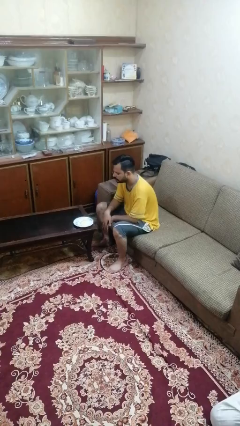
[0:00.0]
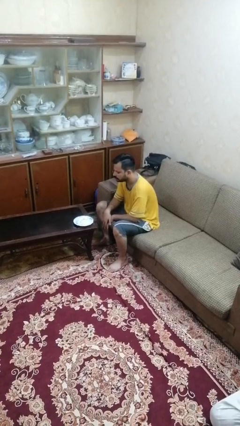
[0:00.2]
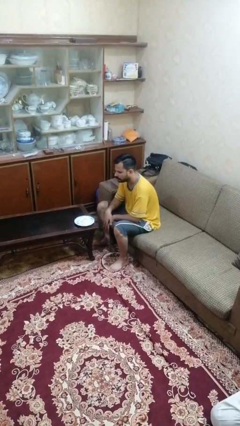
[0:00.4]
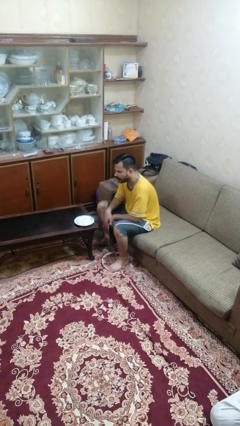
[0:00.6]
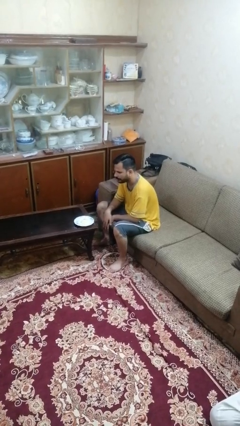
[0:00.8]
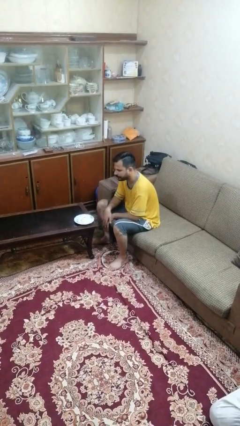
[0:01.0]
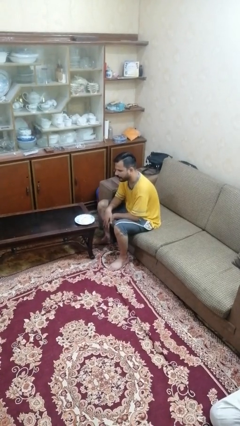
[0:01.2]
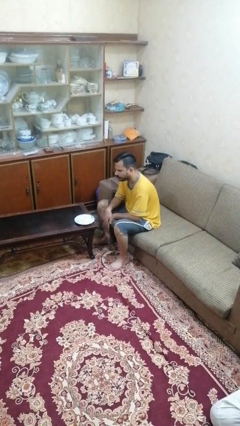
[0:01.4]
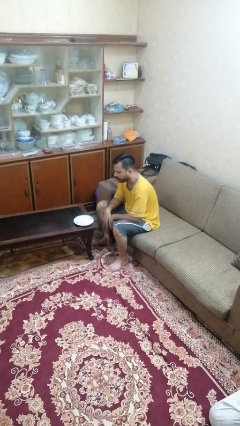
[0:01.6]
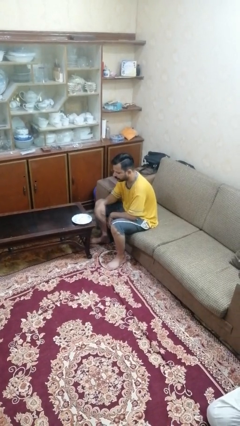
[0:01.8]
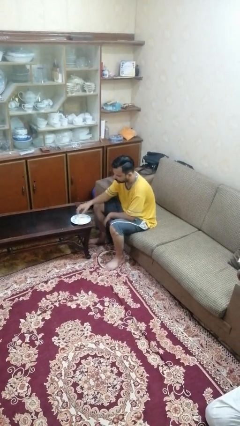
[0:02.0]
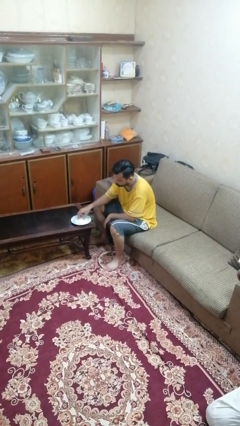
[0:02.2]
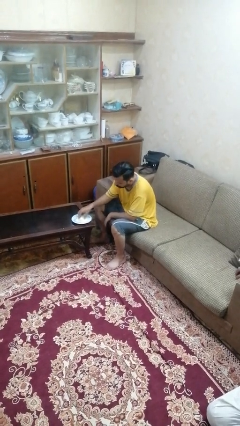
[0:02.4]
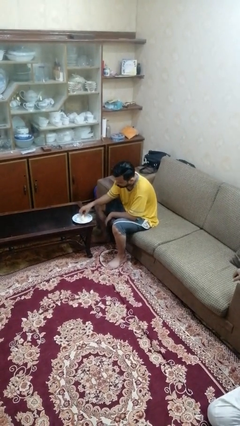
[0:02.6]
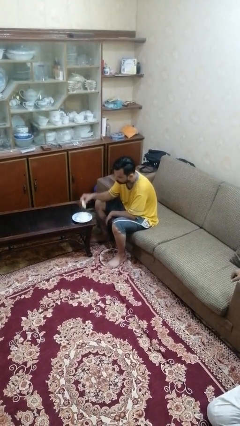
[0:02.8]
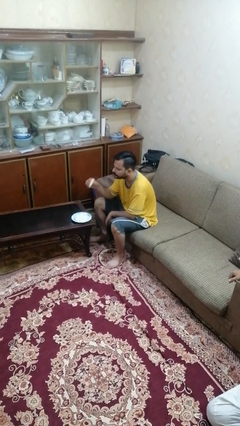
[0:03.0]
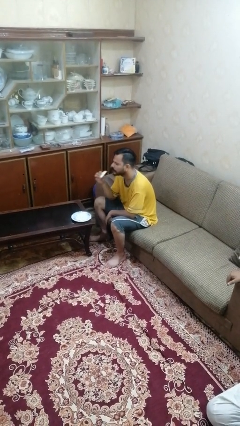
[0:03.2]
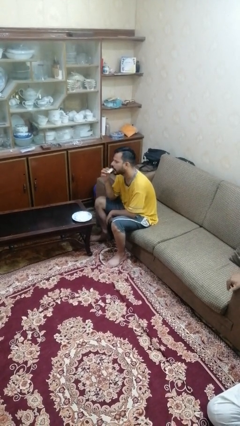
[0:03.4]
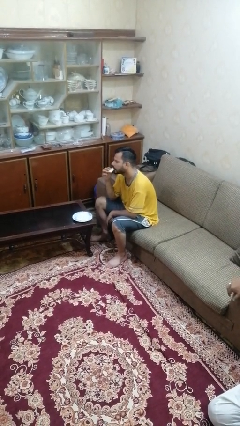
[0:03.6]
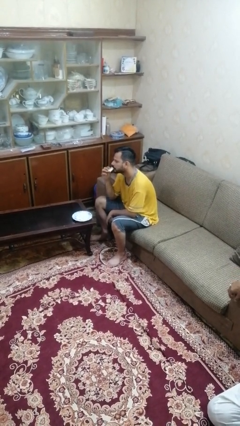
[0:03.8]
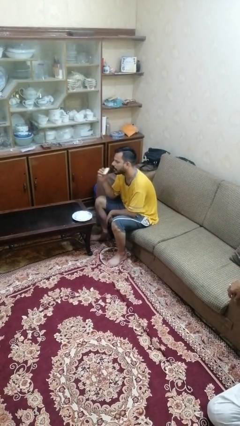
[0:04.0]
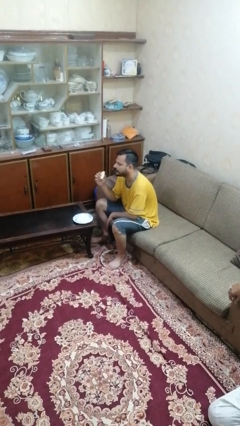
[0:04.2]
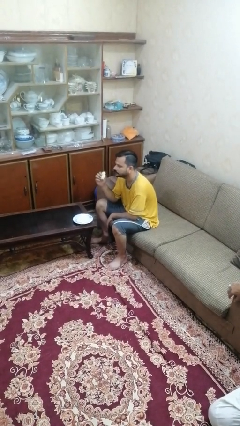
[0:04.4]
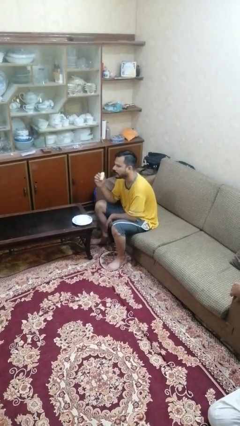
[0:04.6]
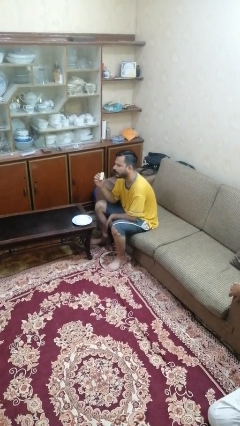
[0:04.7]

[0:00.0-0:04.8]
person eats with hands

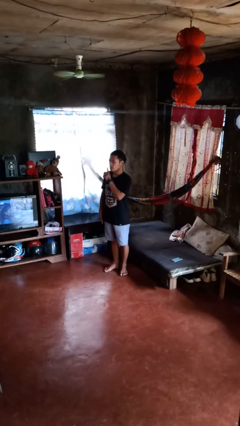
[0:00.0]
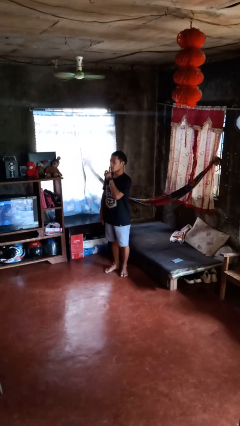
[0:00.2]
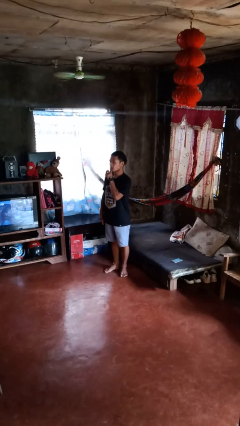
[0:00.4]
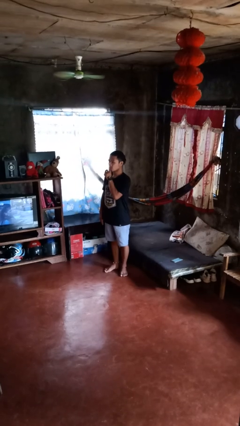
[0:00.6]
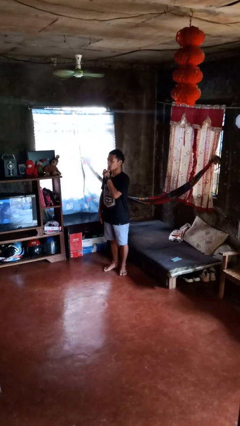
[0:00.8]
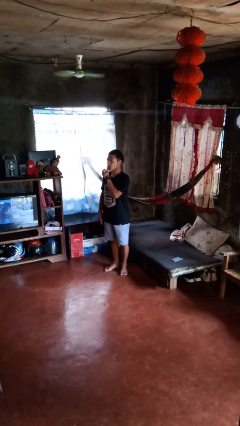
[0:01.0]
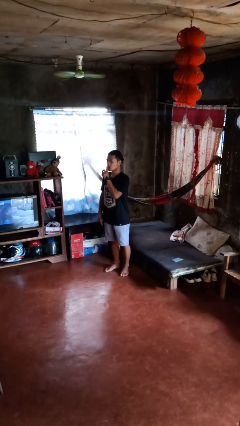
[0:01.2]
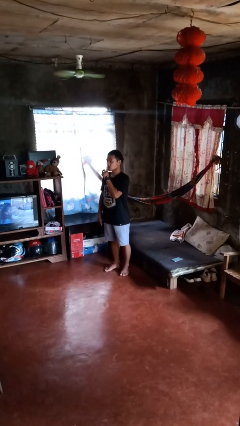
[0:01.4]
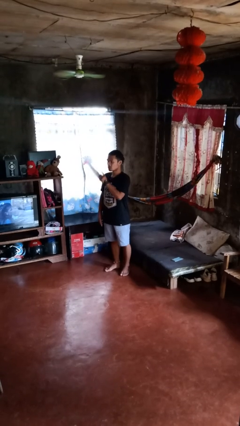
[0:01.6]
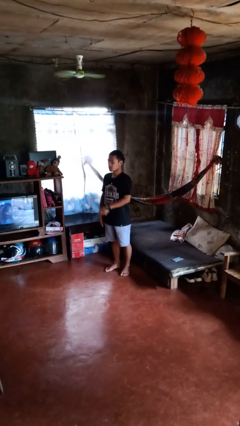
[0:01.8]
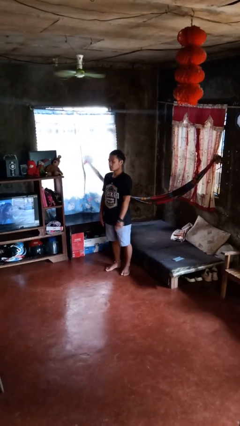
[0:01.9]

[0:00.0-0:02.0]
person gestures be quiet

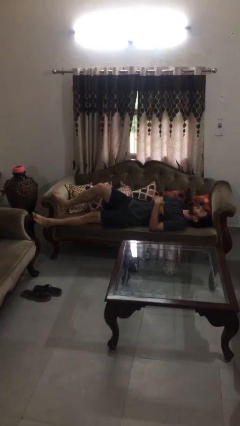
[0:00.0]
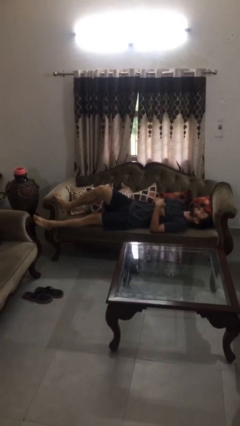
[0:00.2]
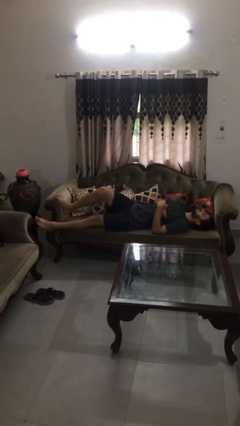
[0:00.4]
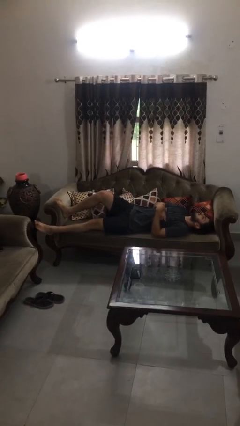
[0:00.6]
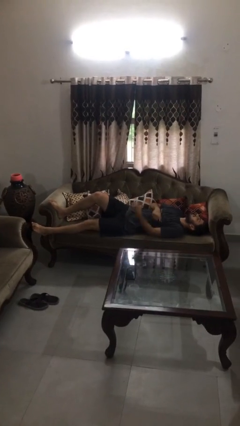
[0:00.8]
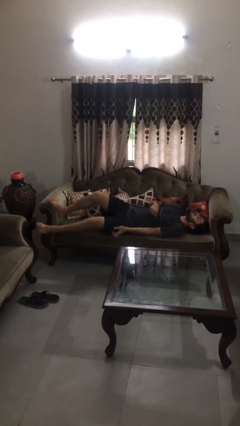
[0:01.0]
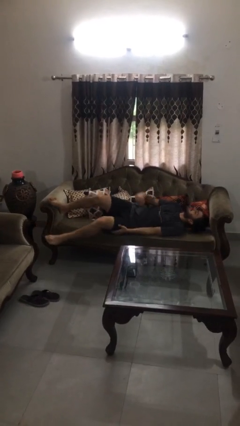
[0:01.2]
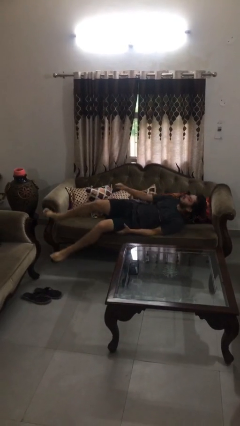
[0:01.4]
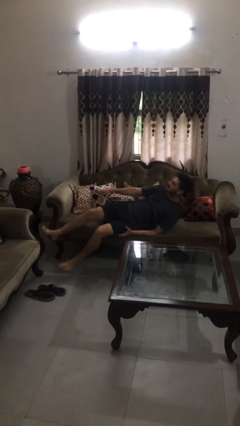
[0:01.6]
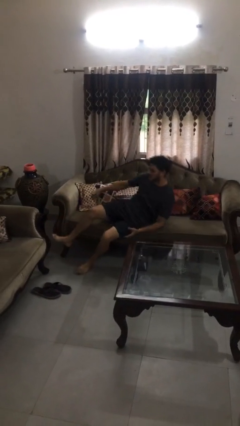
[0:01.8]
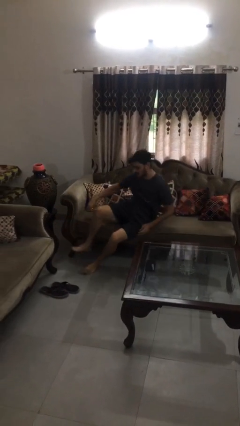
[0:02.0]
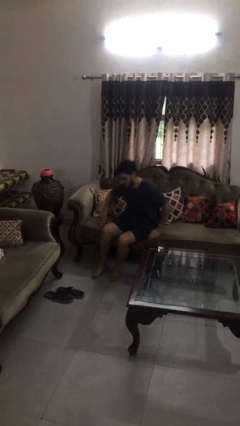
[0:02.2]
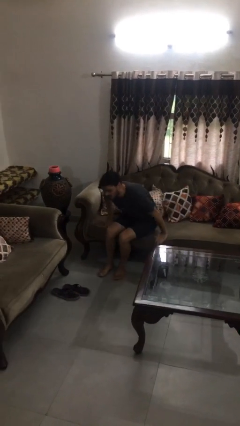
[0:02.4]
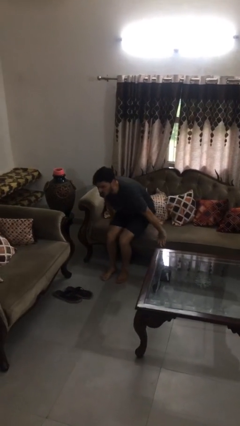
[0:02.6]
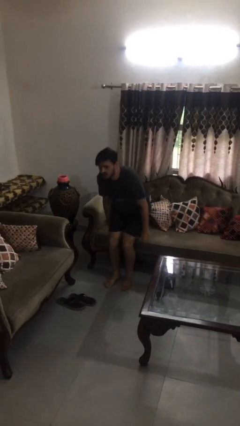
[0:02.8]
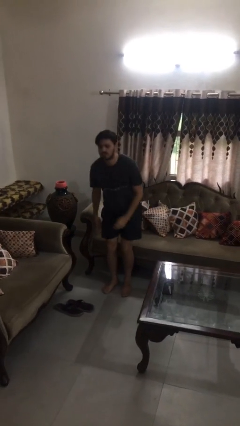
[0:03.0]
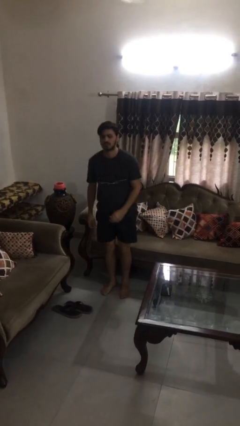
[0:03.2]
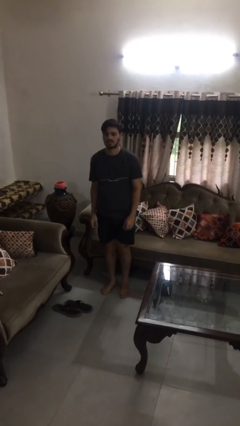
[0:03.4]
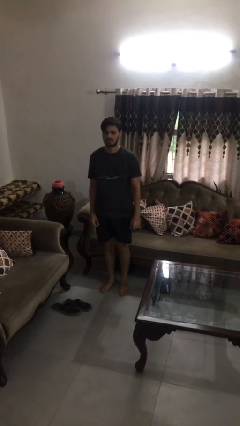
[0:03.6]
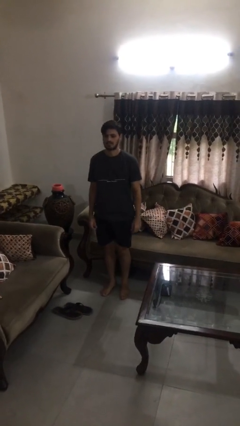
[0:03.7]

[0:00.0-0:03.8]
person stands up

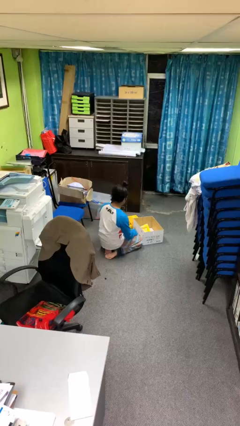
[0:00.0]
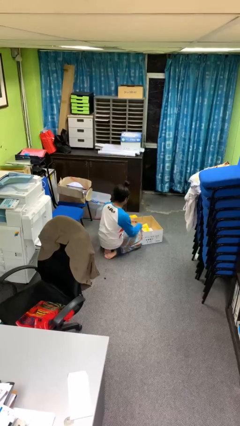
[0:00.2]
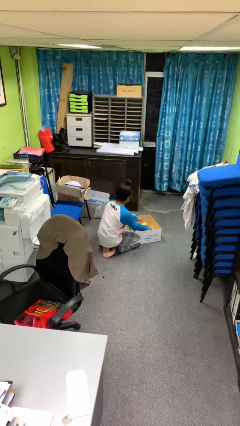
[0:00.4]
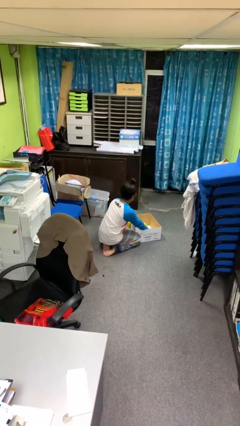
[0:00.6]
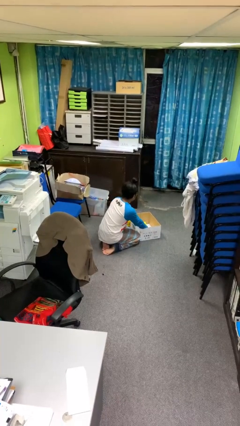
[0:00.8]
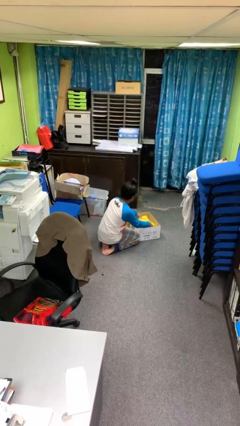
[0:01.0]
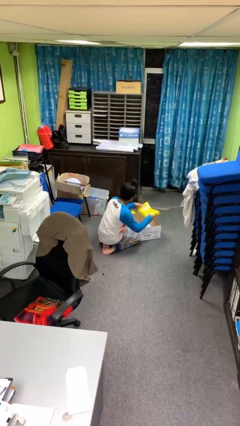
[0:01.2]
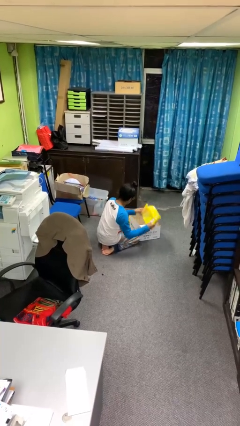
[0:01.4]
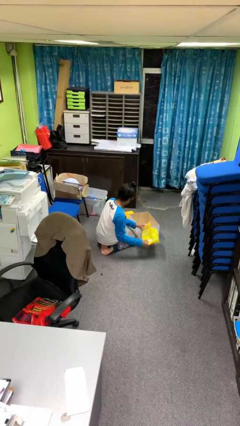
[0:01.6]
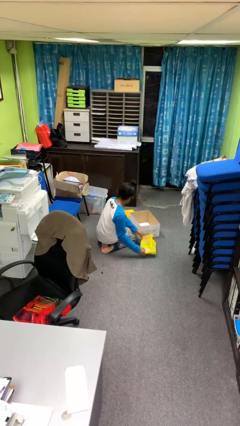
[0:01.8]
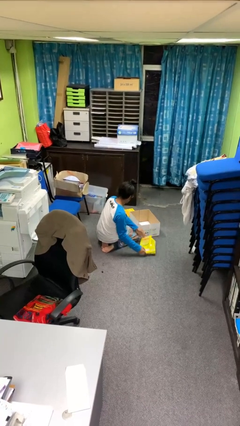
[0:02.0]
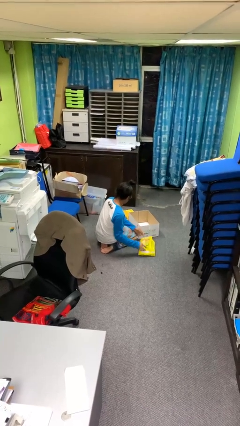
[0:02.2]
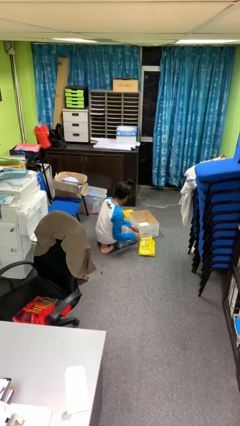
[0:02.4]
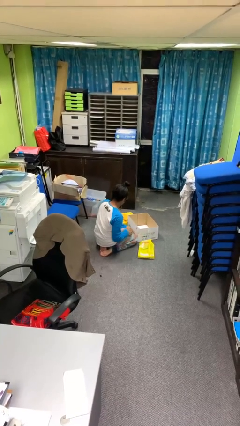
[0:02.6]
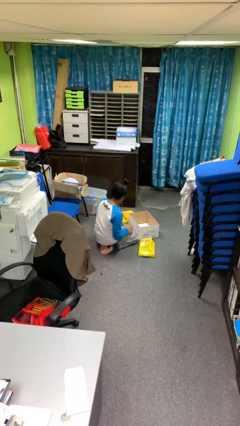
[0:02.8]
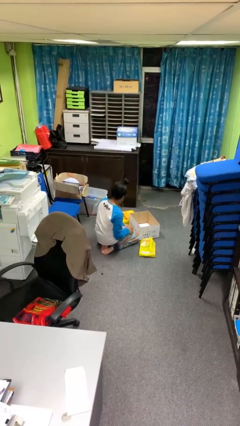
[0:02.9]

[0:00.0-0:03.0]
person takes object from box

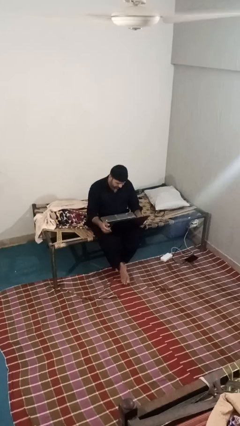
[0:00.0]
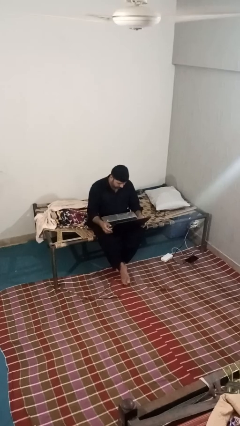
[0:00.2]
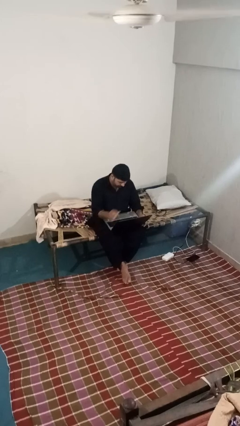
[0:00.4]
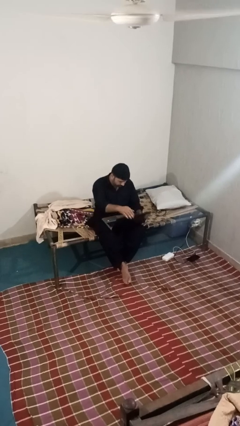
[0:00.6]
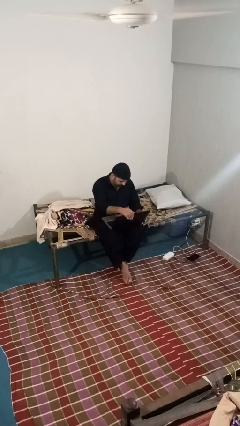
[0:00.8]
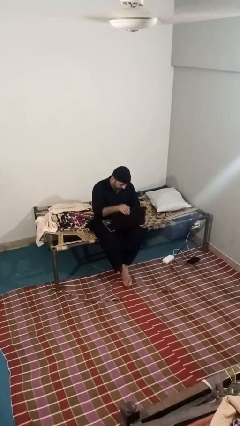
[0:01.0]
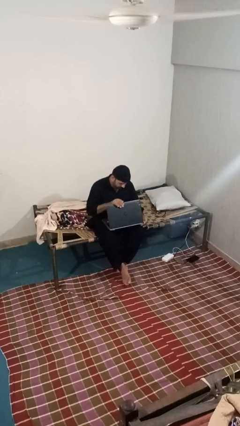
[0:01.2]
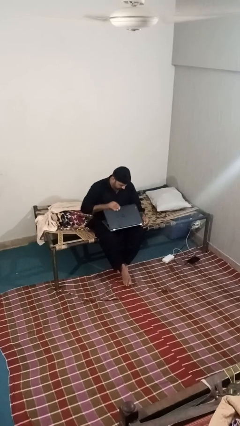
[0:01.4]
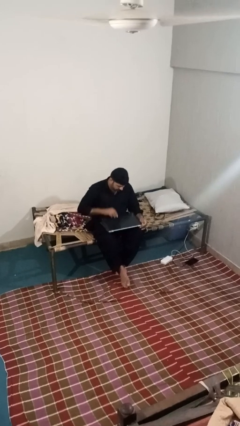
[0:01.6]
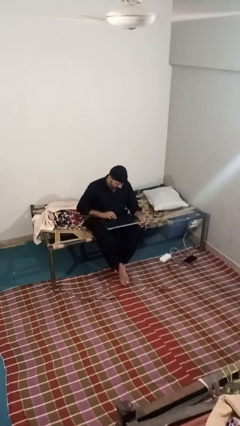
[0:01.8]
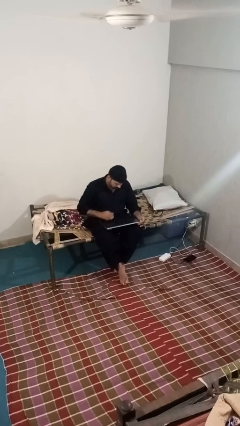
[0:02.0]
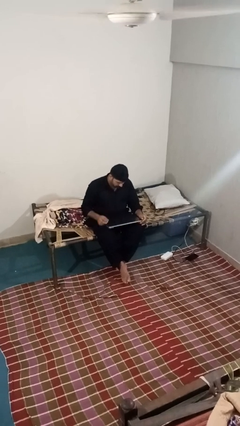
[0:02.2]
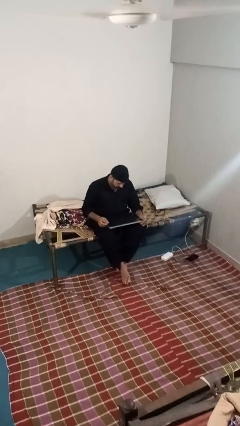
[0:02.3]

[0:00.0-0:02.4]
person closes laptop

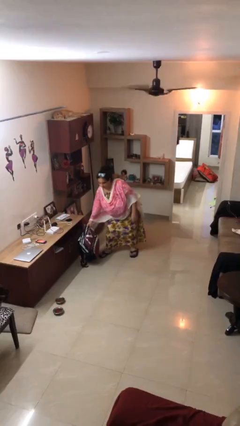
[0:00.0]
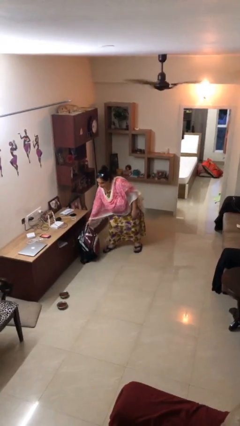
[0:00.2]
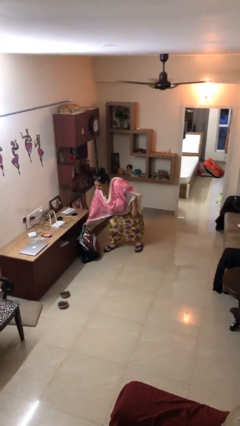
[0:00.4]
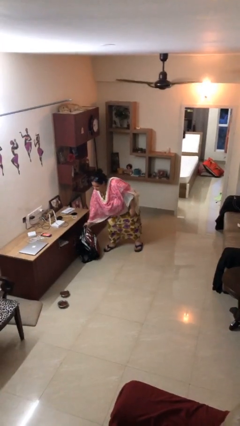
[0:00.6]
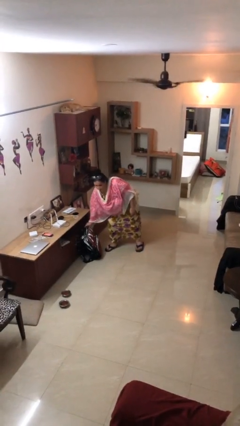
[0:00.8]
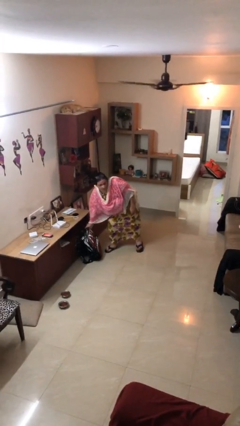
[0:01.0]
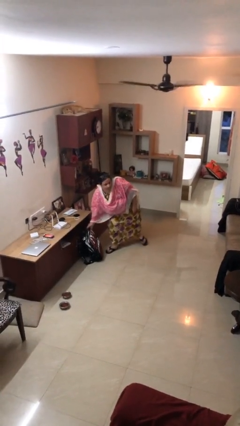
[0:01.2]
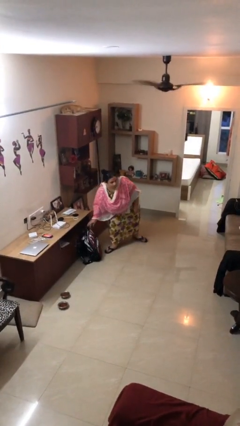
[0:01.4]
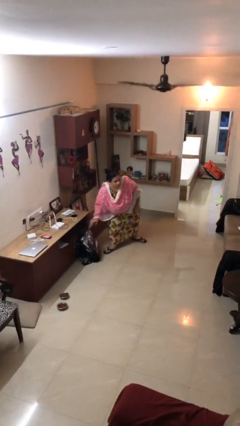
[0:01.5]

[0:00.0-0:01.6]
person puts down object on floor
